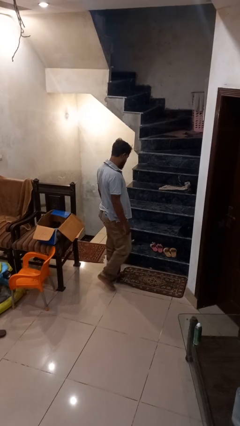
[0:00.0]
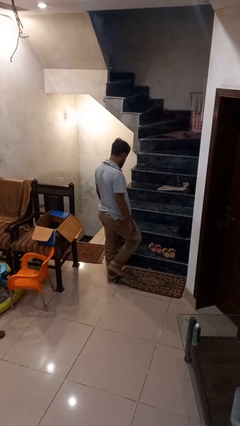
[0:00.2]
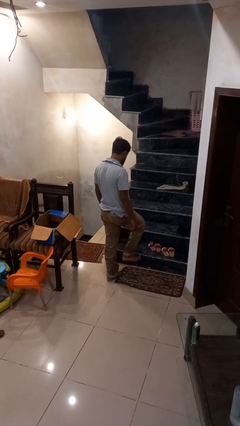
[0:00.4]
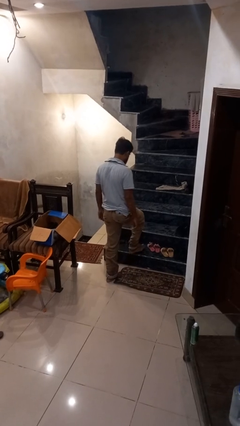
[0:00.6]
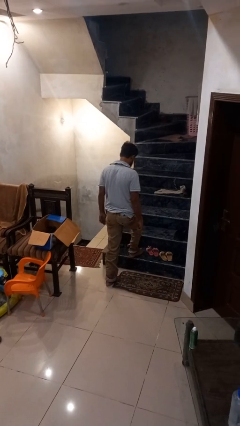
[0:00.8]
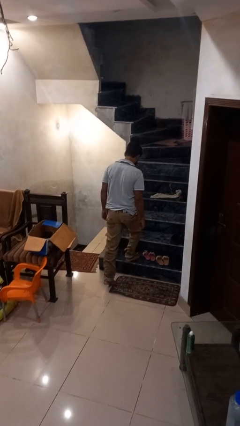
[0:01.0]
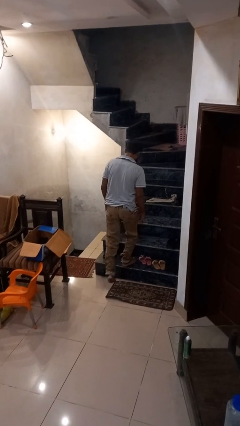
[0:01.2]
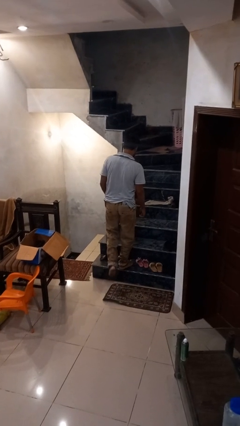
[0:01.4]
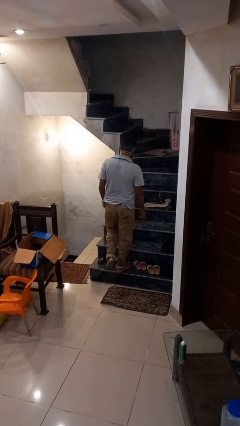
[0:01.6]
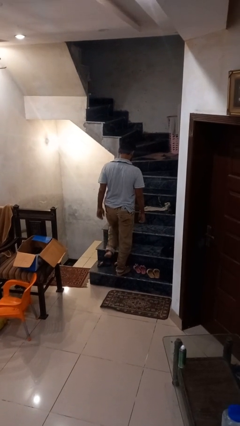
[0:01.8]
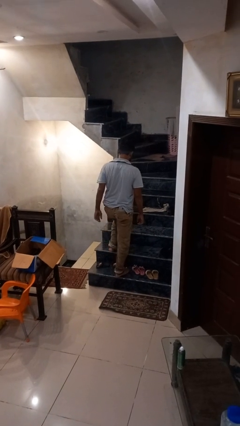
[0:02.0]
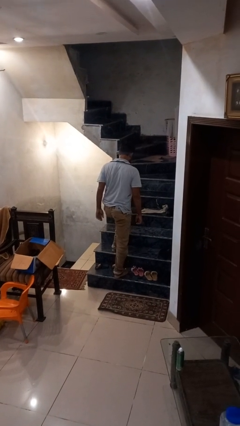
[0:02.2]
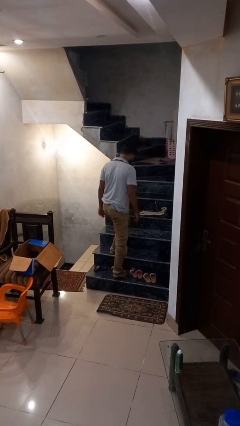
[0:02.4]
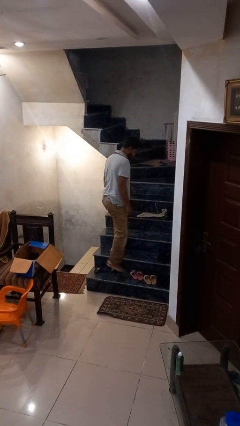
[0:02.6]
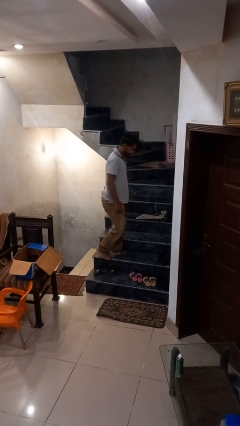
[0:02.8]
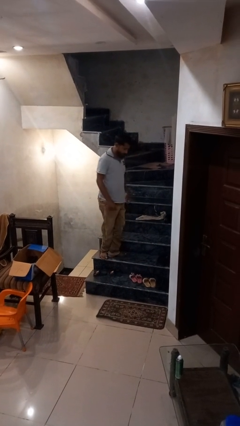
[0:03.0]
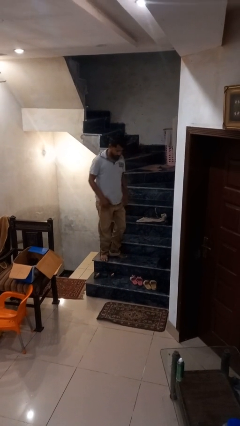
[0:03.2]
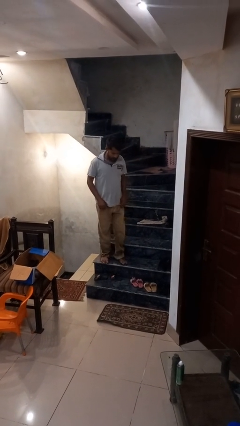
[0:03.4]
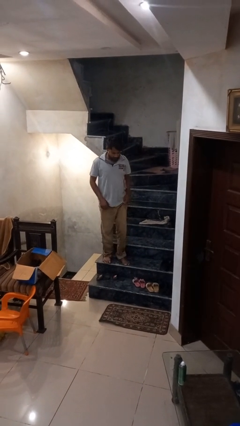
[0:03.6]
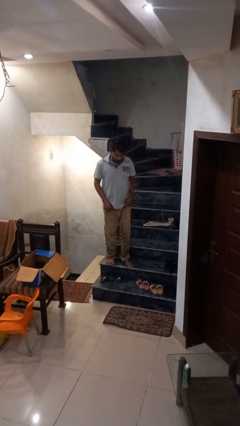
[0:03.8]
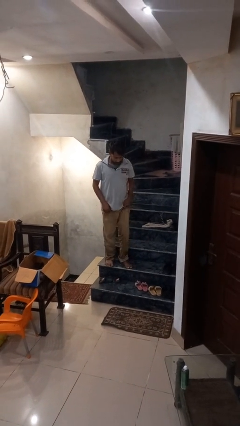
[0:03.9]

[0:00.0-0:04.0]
person climbs up stairs

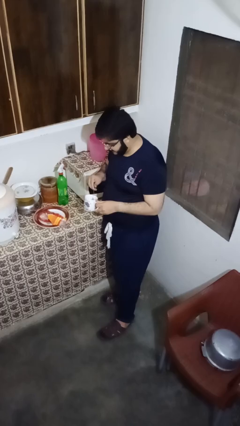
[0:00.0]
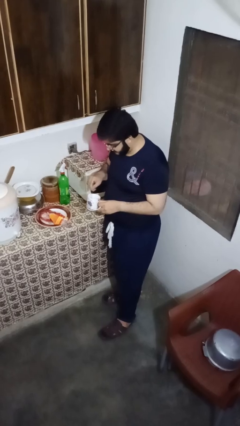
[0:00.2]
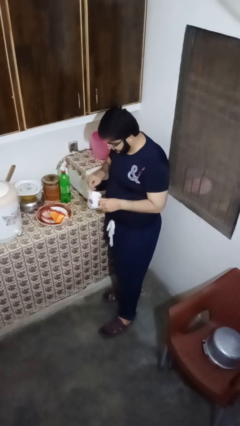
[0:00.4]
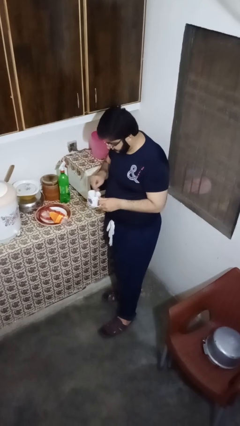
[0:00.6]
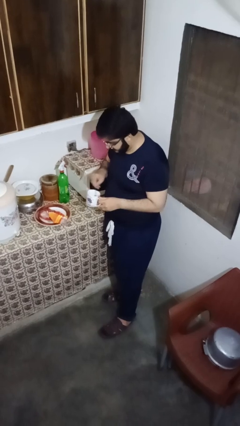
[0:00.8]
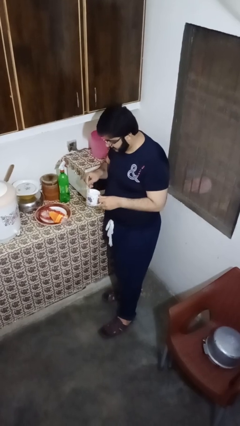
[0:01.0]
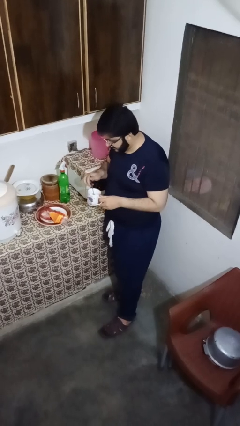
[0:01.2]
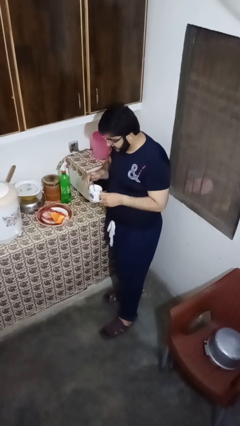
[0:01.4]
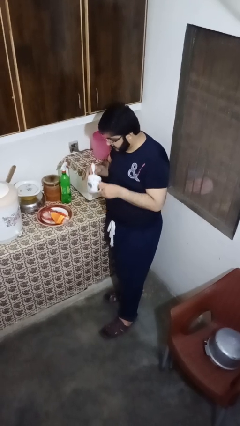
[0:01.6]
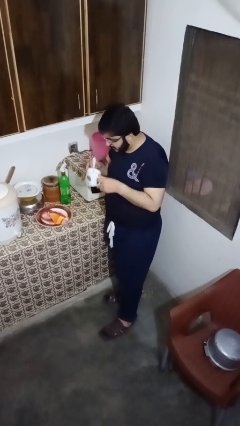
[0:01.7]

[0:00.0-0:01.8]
person stirs mug

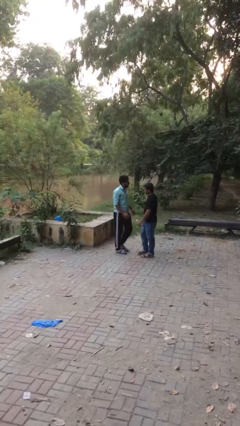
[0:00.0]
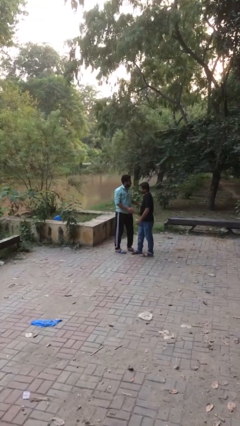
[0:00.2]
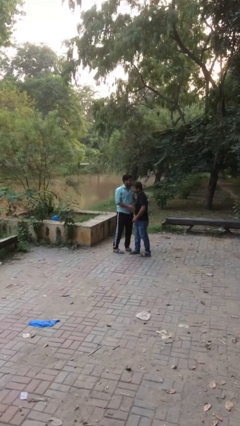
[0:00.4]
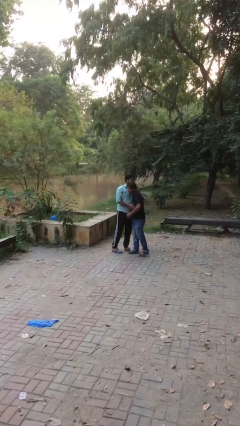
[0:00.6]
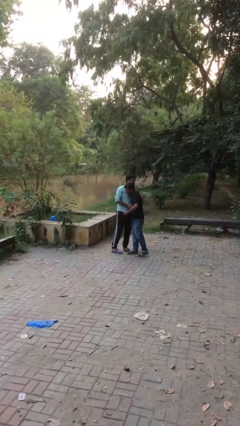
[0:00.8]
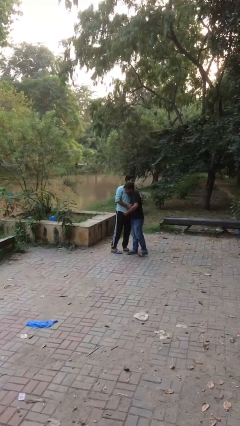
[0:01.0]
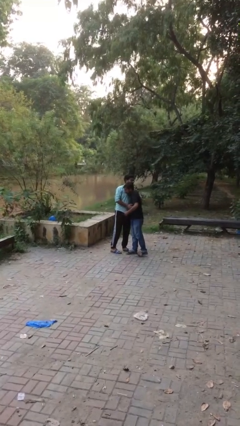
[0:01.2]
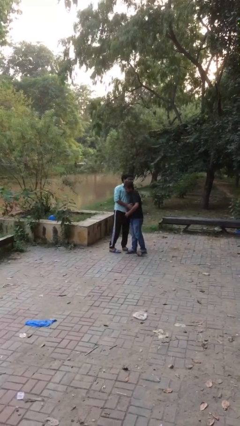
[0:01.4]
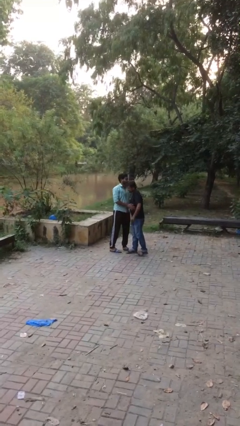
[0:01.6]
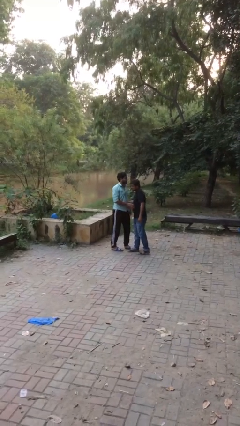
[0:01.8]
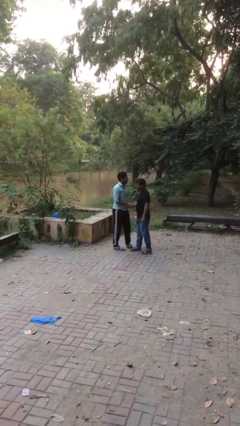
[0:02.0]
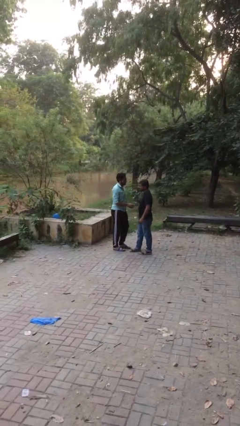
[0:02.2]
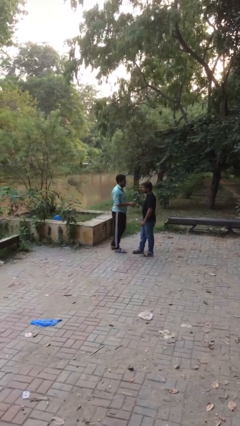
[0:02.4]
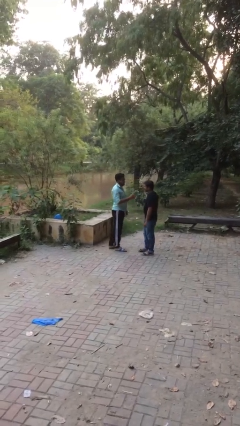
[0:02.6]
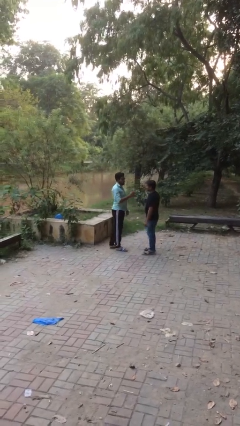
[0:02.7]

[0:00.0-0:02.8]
person embraces person

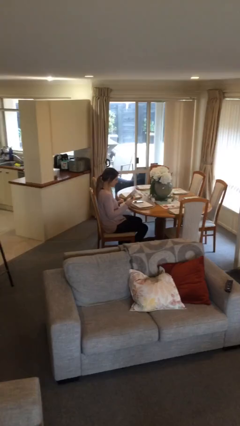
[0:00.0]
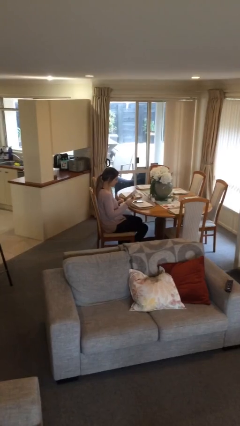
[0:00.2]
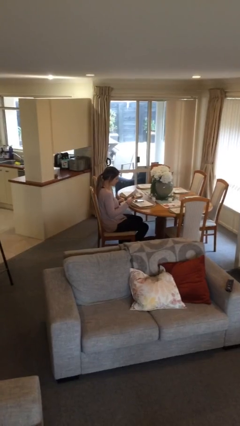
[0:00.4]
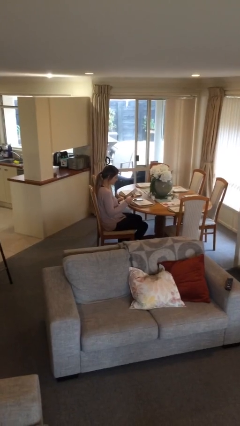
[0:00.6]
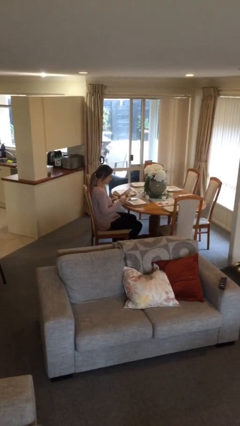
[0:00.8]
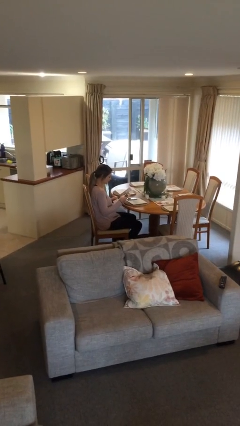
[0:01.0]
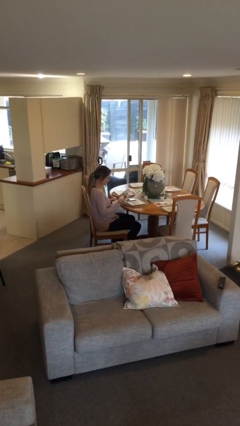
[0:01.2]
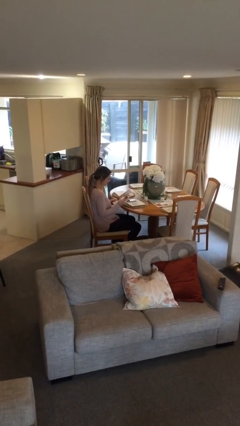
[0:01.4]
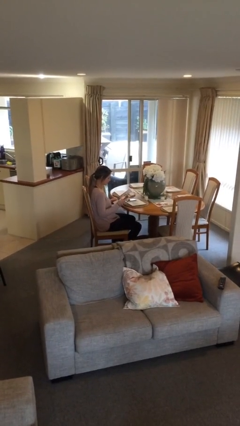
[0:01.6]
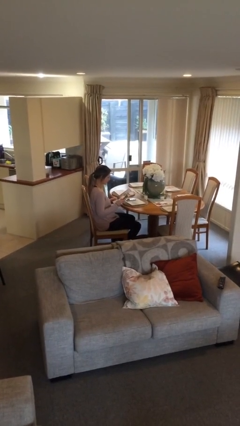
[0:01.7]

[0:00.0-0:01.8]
person reads document

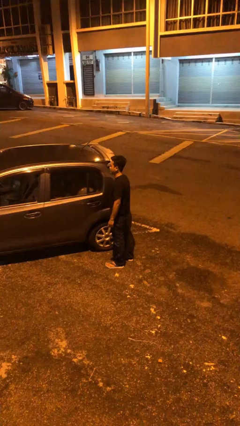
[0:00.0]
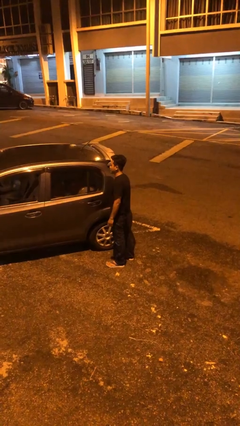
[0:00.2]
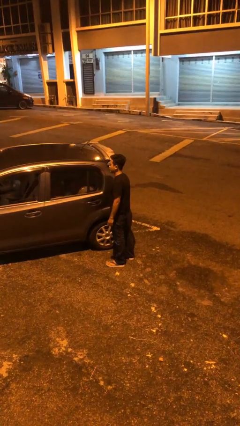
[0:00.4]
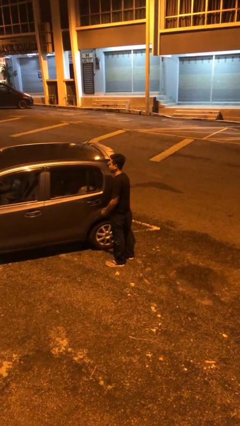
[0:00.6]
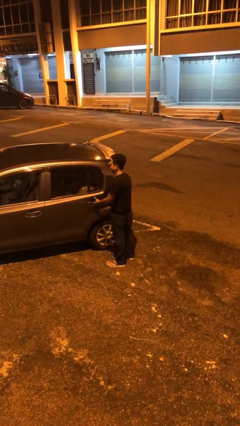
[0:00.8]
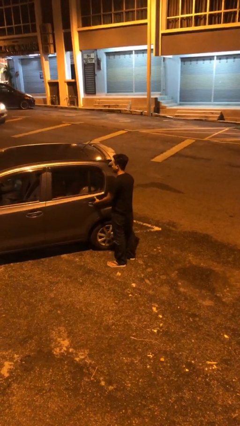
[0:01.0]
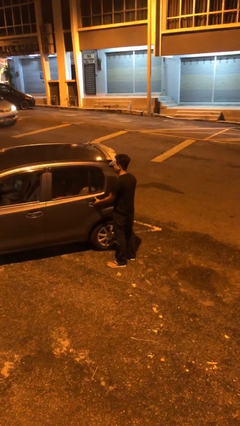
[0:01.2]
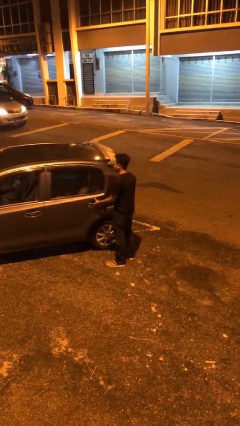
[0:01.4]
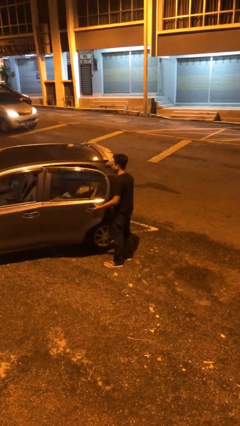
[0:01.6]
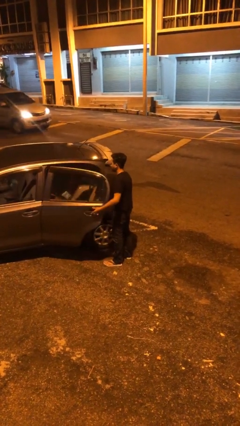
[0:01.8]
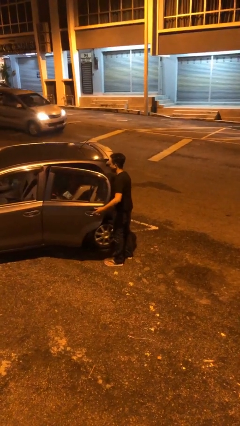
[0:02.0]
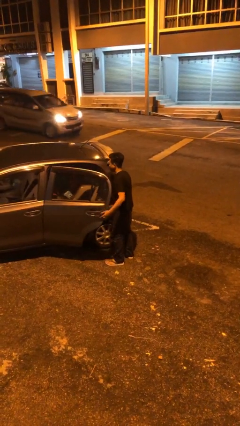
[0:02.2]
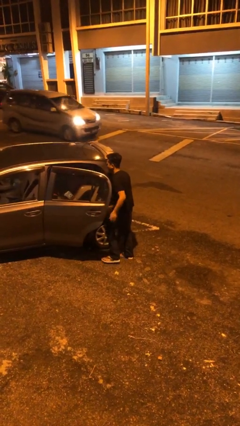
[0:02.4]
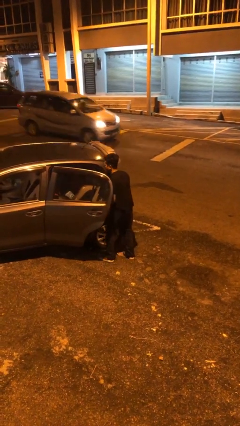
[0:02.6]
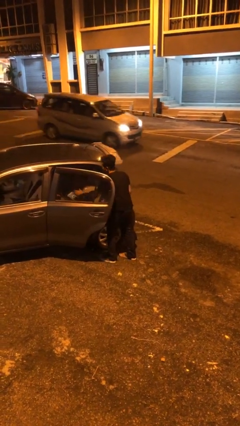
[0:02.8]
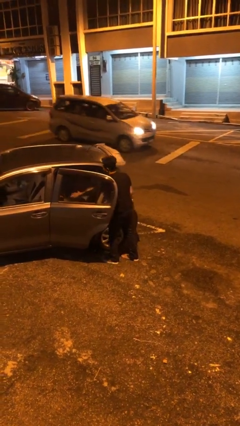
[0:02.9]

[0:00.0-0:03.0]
person opens car door

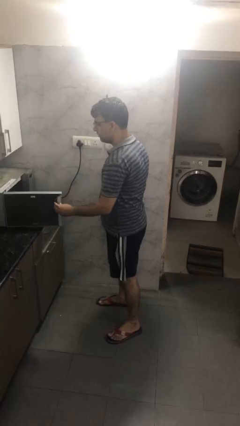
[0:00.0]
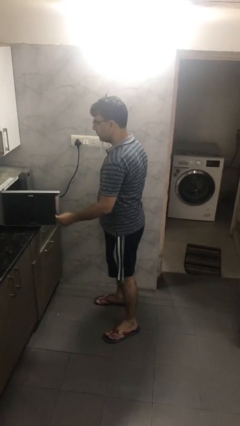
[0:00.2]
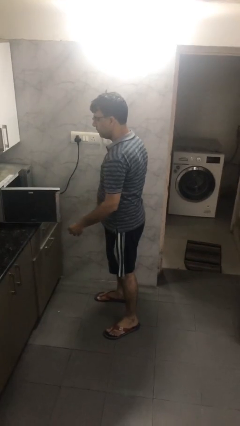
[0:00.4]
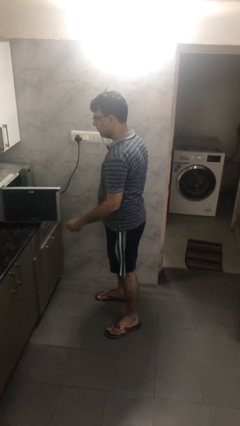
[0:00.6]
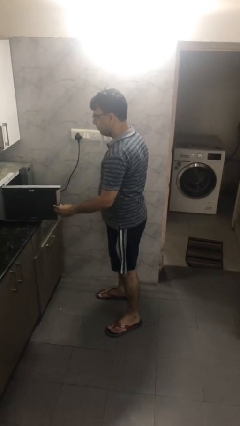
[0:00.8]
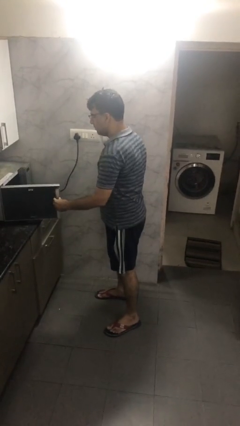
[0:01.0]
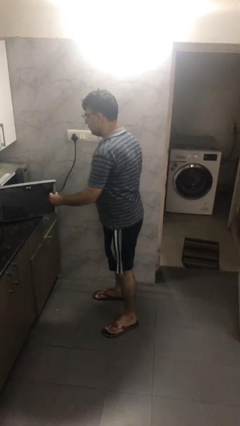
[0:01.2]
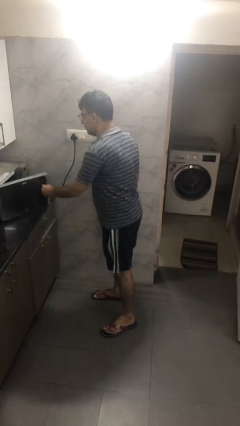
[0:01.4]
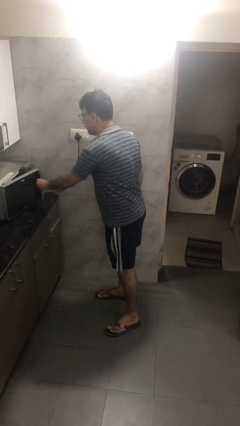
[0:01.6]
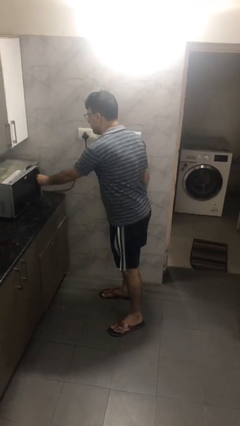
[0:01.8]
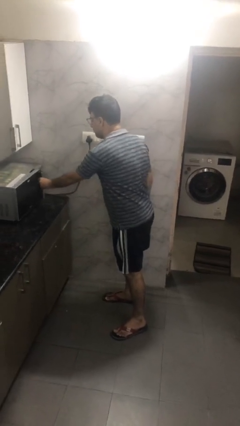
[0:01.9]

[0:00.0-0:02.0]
person closes microwave

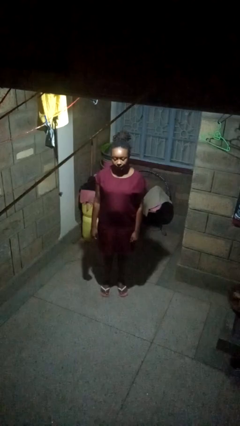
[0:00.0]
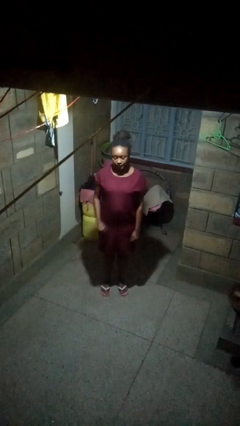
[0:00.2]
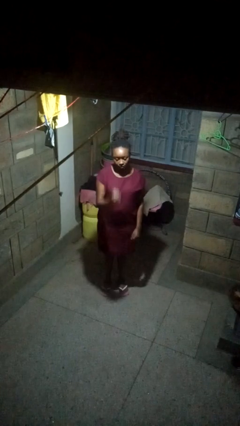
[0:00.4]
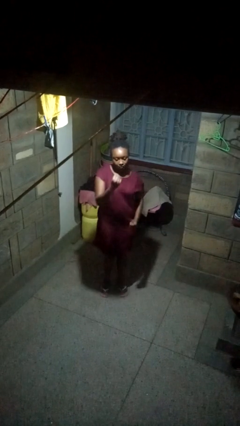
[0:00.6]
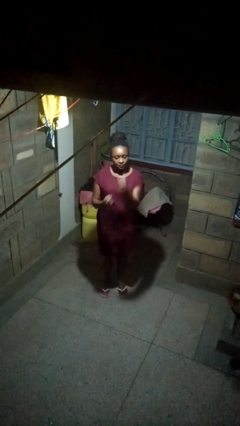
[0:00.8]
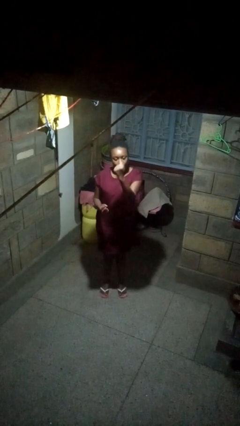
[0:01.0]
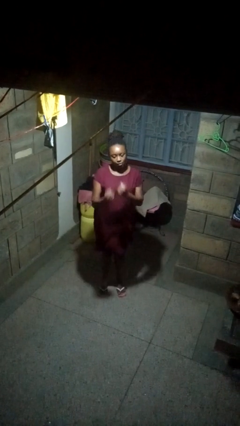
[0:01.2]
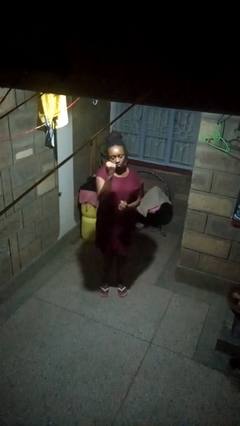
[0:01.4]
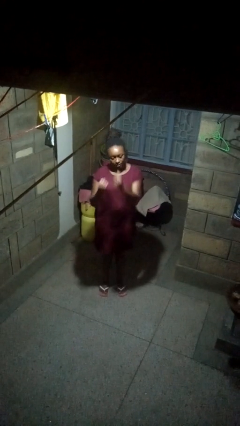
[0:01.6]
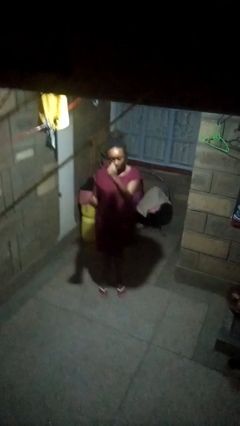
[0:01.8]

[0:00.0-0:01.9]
person punches
